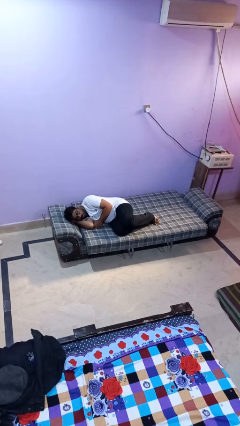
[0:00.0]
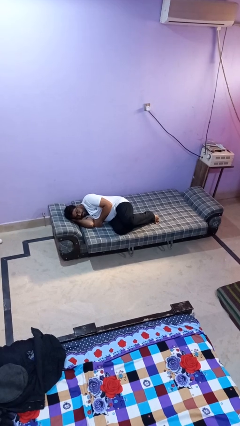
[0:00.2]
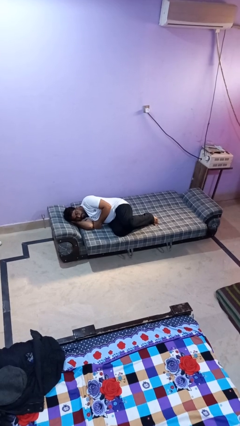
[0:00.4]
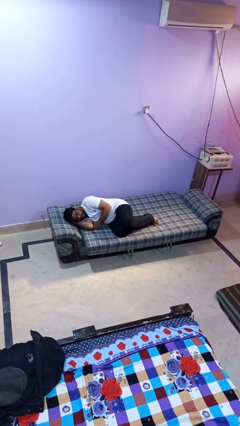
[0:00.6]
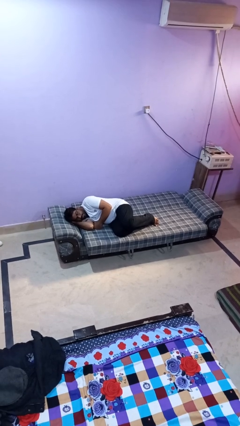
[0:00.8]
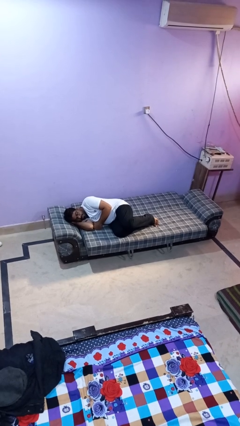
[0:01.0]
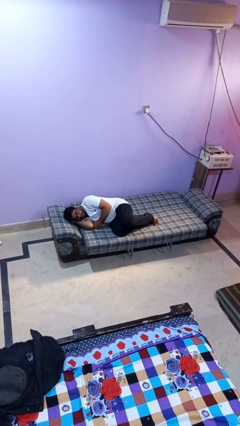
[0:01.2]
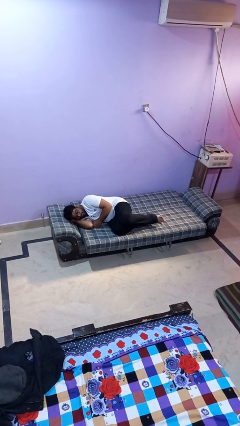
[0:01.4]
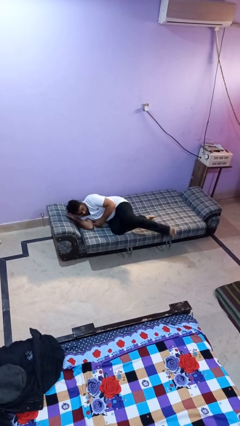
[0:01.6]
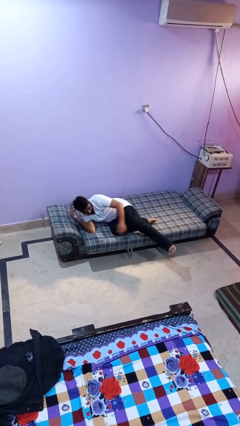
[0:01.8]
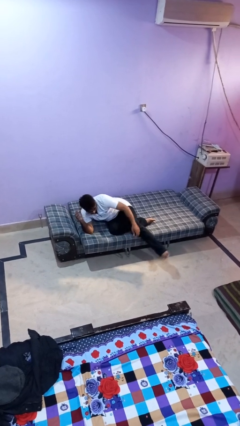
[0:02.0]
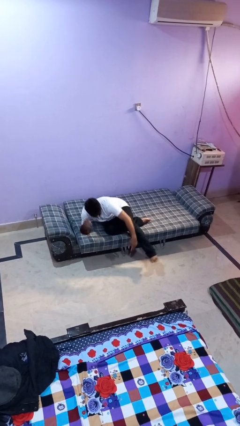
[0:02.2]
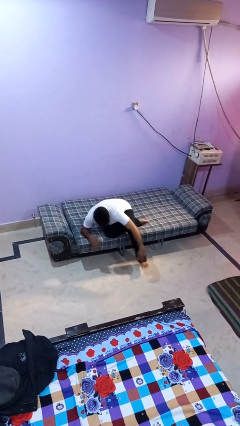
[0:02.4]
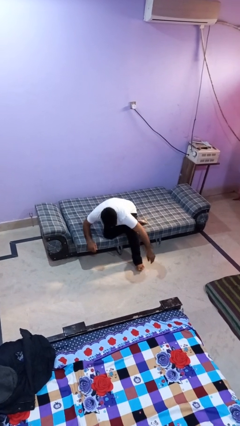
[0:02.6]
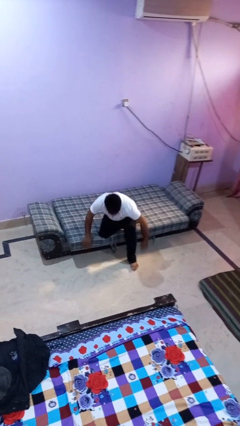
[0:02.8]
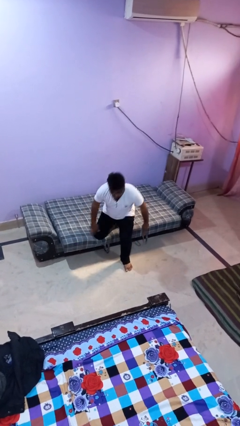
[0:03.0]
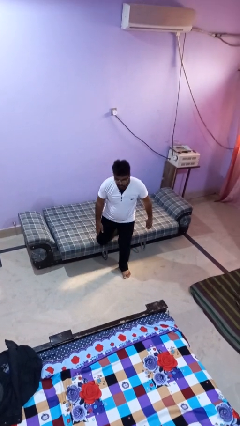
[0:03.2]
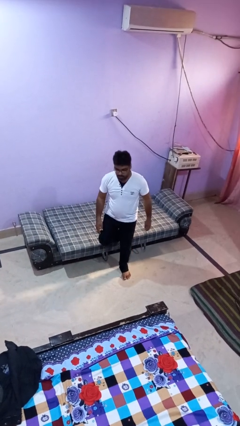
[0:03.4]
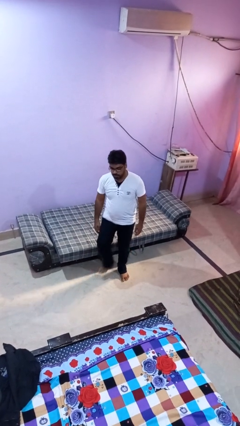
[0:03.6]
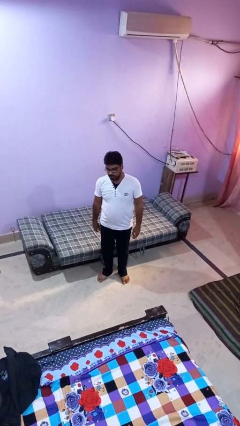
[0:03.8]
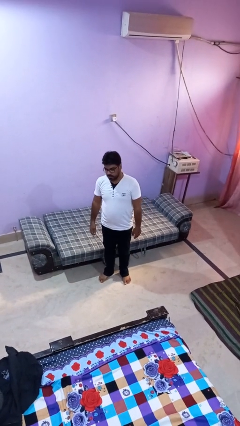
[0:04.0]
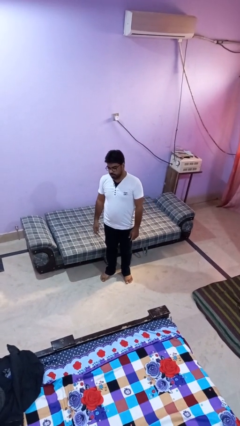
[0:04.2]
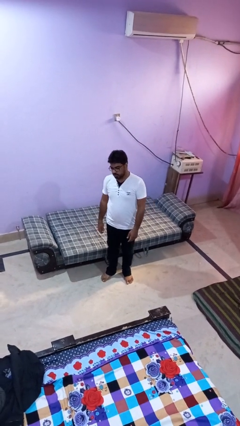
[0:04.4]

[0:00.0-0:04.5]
person stands up

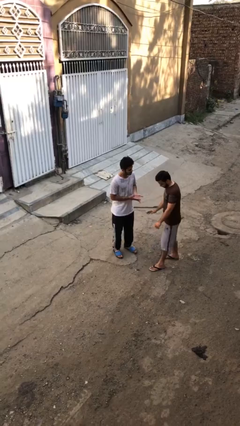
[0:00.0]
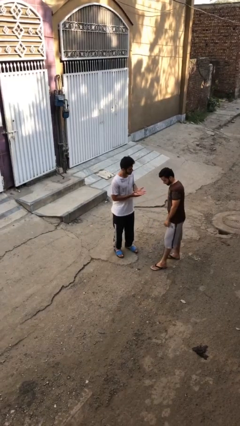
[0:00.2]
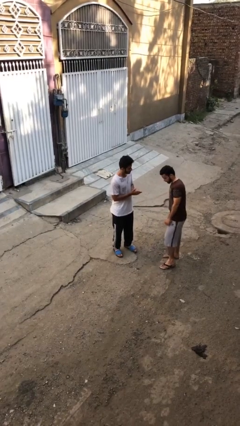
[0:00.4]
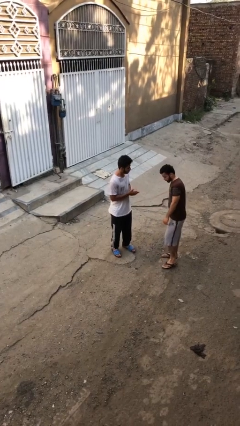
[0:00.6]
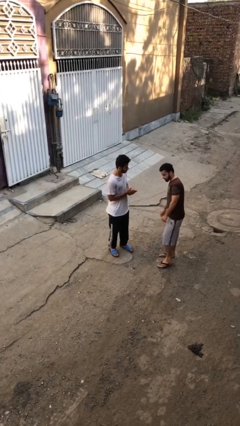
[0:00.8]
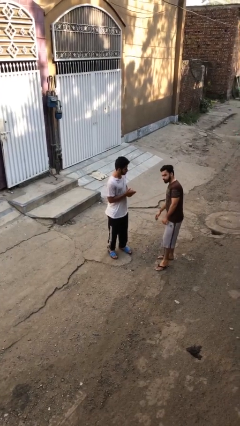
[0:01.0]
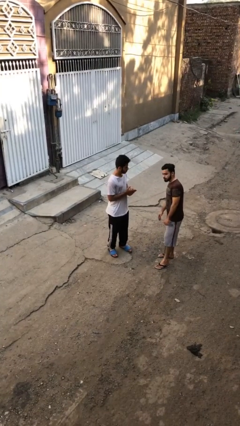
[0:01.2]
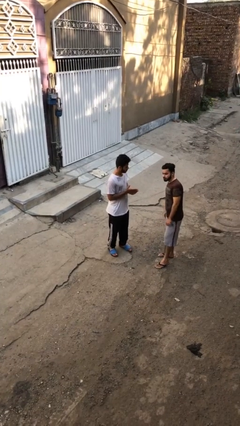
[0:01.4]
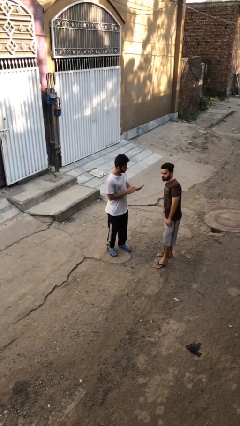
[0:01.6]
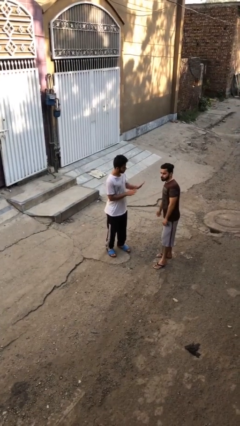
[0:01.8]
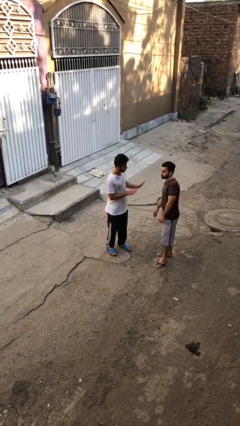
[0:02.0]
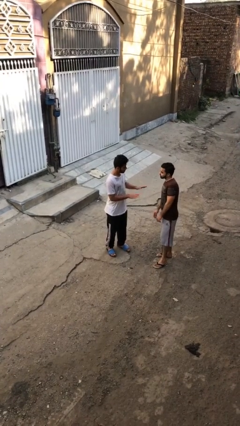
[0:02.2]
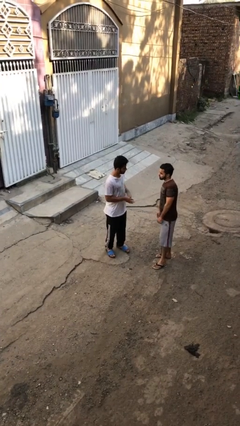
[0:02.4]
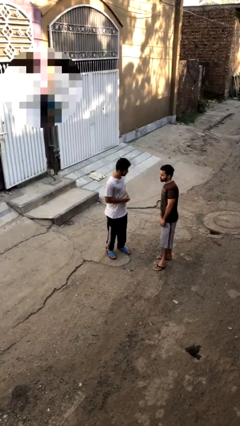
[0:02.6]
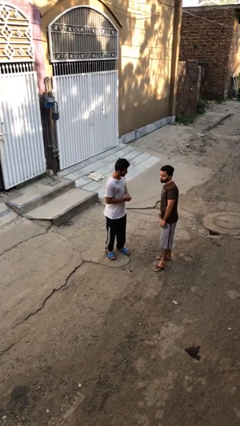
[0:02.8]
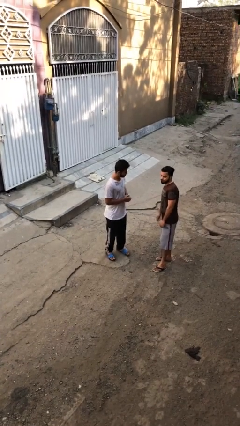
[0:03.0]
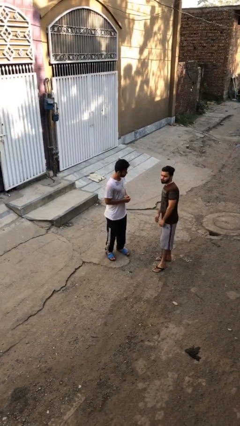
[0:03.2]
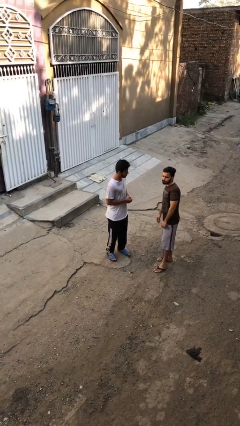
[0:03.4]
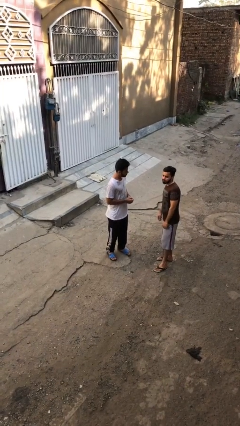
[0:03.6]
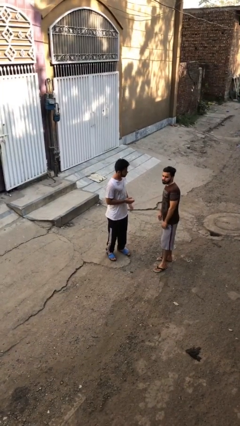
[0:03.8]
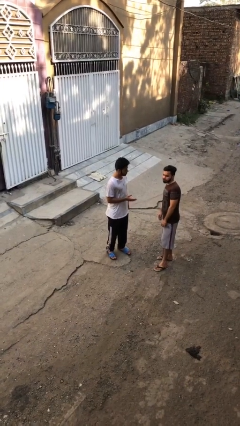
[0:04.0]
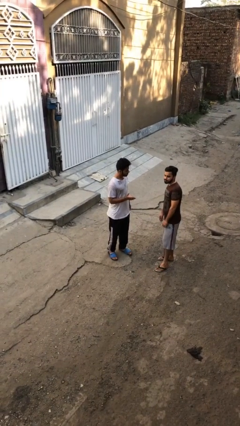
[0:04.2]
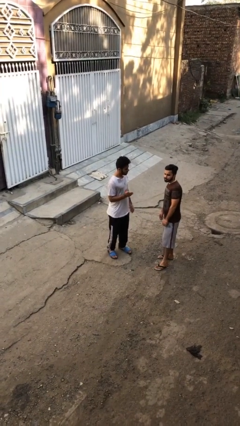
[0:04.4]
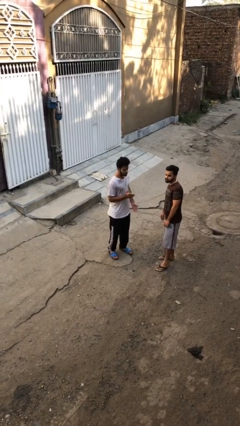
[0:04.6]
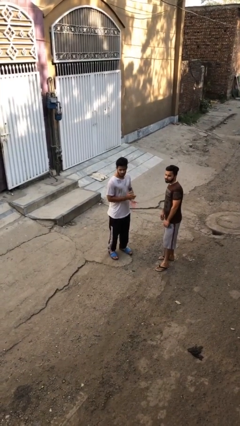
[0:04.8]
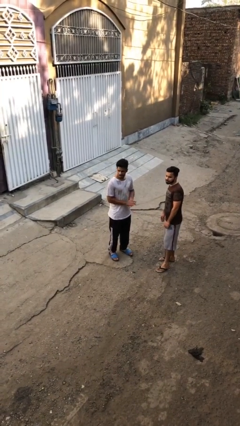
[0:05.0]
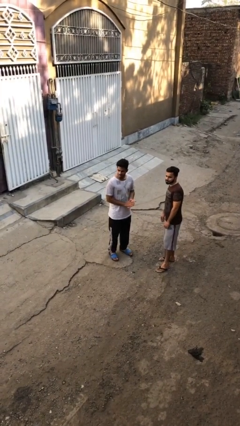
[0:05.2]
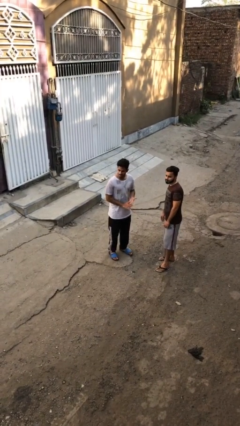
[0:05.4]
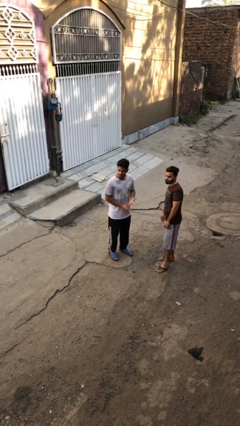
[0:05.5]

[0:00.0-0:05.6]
person talks to person

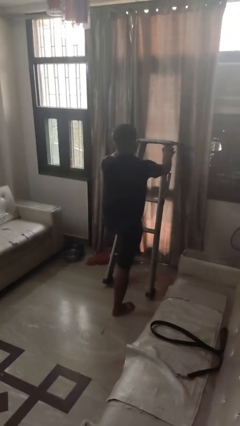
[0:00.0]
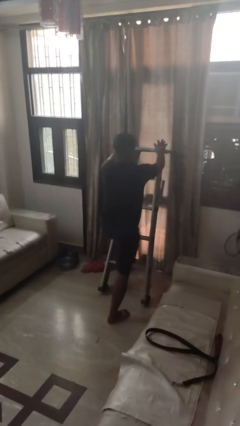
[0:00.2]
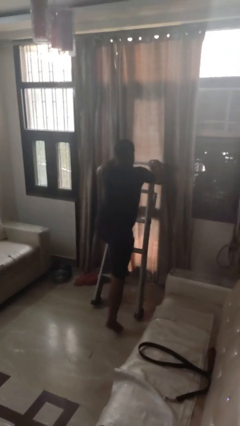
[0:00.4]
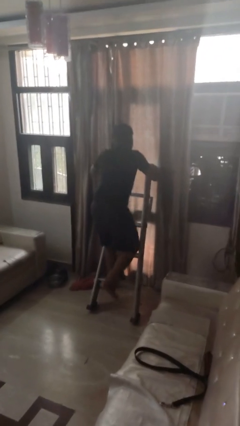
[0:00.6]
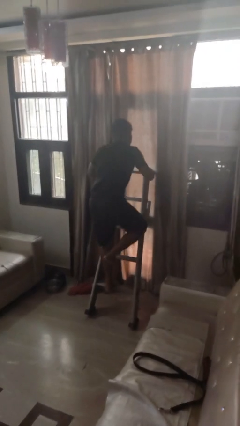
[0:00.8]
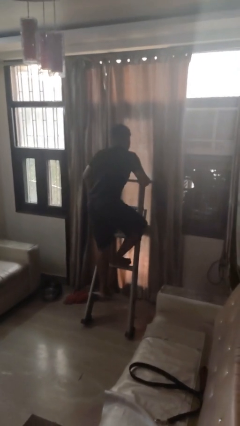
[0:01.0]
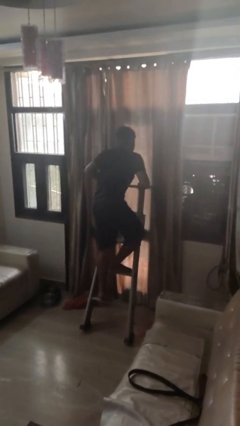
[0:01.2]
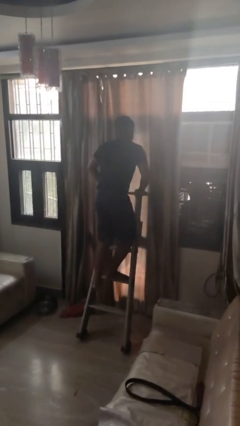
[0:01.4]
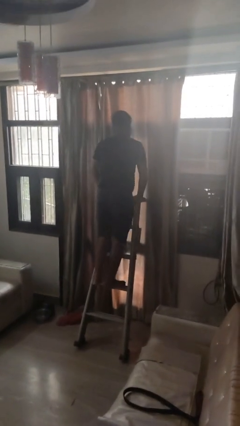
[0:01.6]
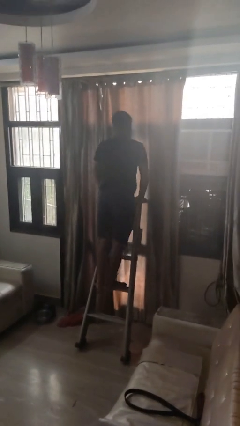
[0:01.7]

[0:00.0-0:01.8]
person climbs up ladder

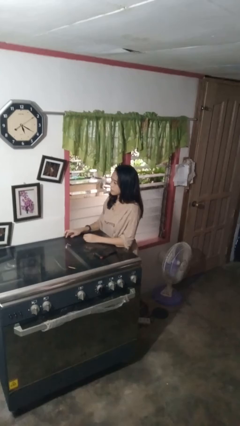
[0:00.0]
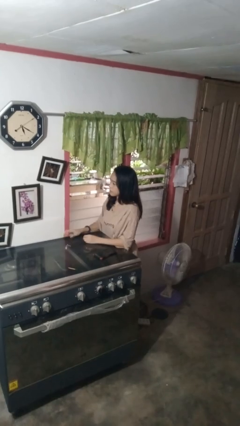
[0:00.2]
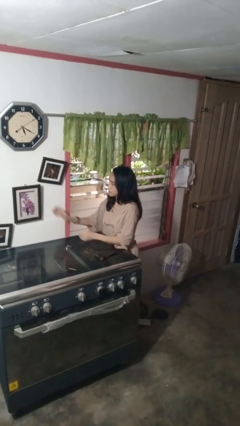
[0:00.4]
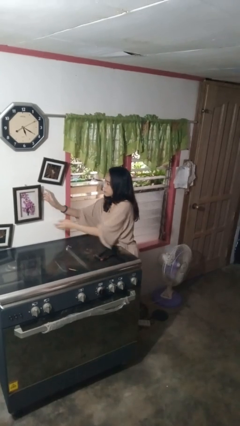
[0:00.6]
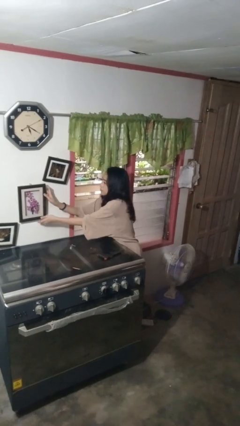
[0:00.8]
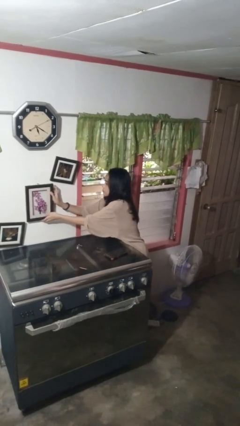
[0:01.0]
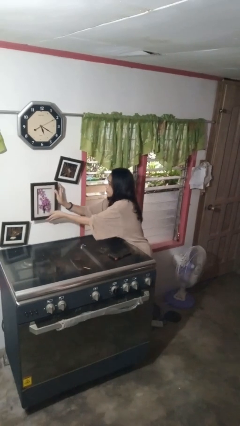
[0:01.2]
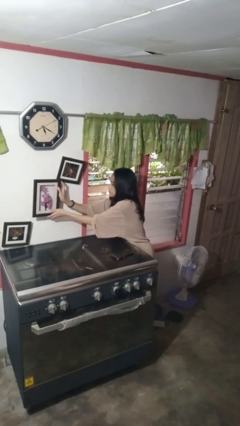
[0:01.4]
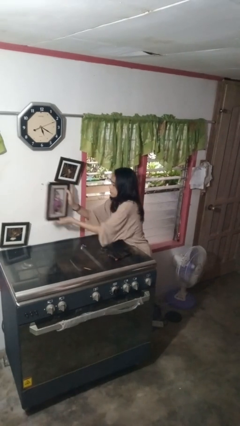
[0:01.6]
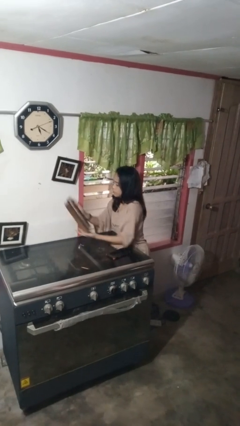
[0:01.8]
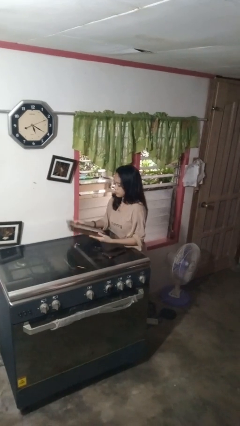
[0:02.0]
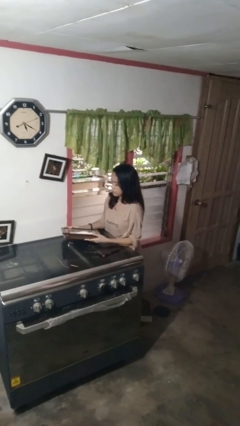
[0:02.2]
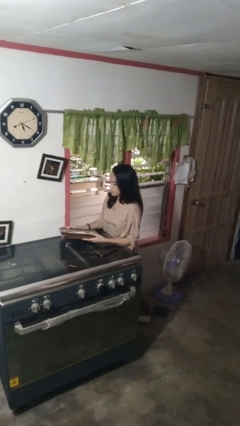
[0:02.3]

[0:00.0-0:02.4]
person takes down picture frame

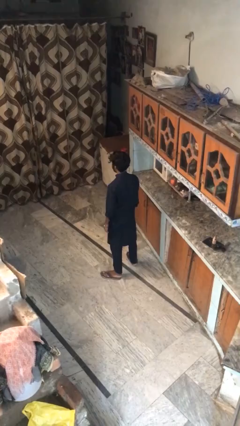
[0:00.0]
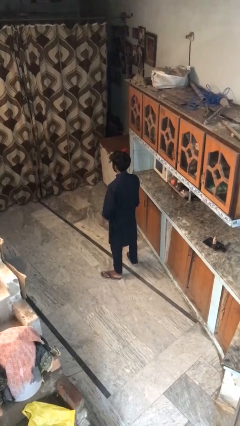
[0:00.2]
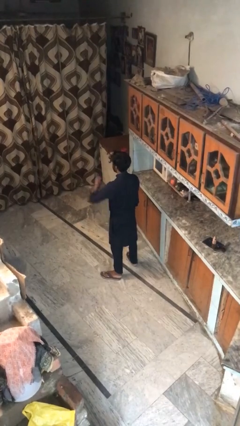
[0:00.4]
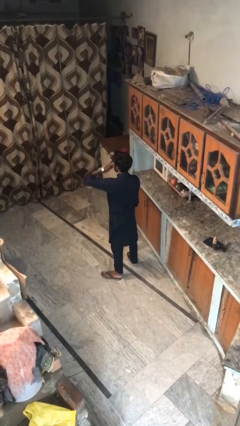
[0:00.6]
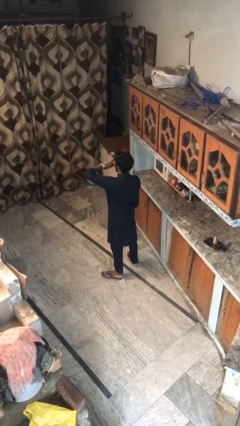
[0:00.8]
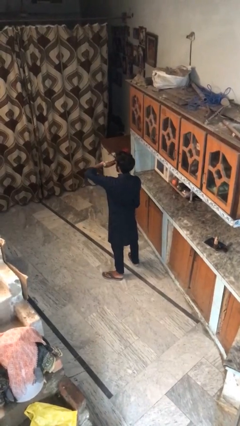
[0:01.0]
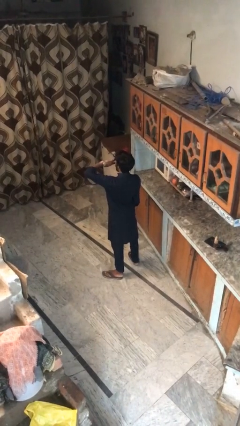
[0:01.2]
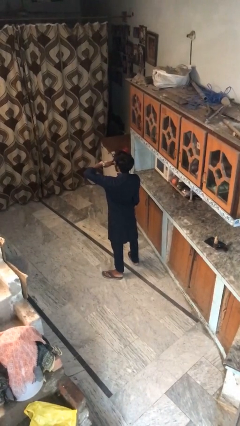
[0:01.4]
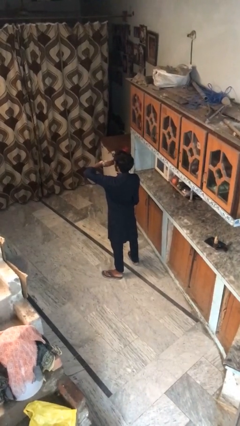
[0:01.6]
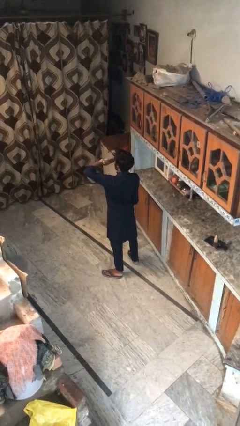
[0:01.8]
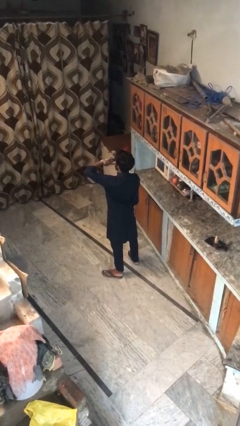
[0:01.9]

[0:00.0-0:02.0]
person yawns

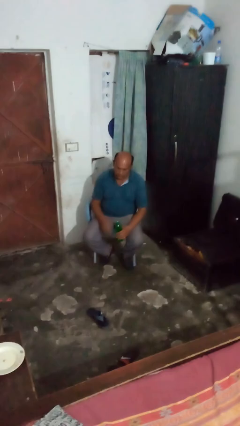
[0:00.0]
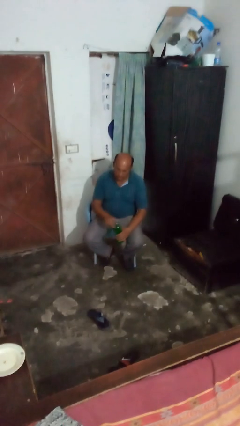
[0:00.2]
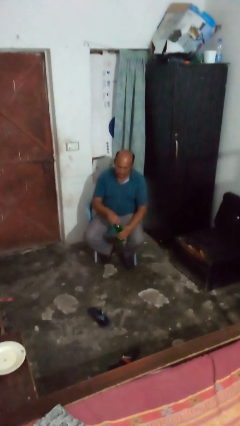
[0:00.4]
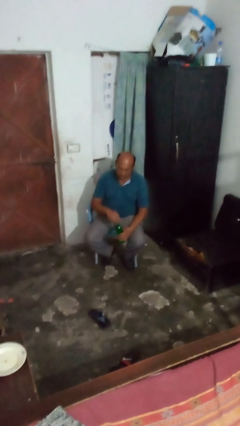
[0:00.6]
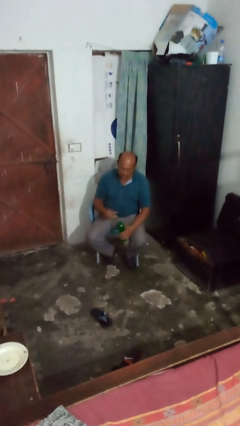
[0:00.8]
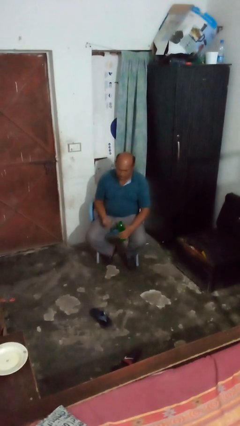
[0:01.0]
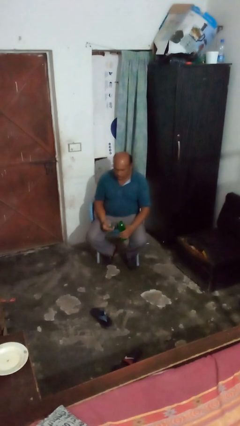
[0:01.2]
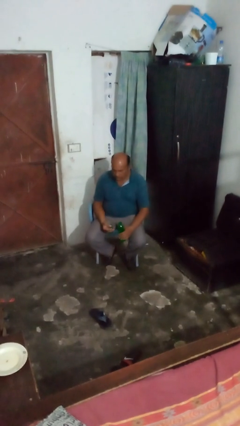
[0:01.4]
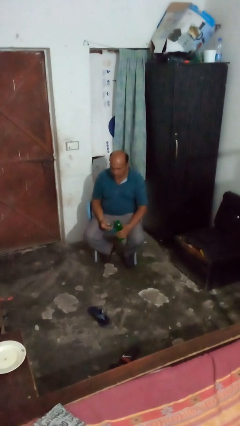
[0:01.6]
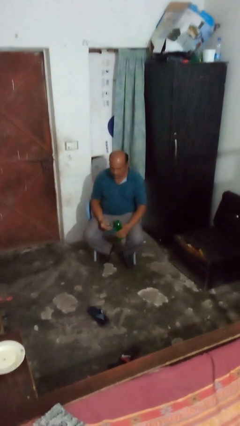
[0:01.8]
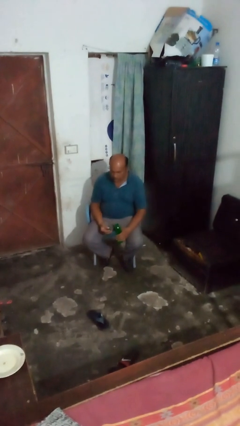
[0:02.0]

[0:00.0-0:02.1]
person unscrews lid from bottle
